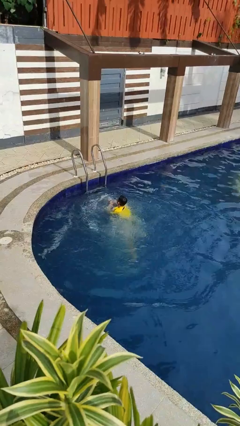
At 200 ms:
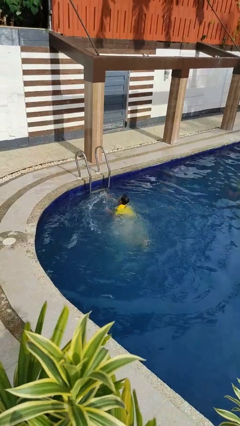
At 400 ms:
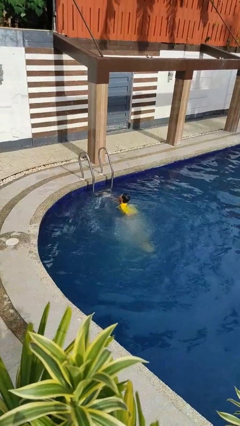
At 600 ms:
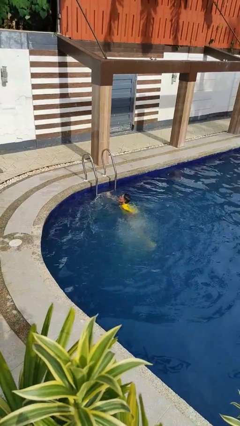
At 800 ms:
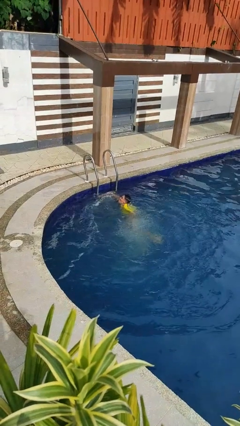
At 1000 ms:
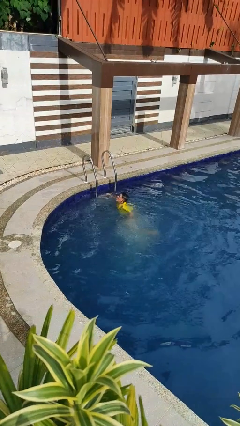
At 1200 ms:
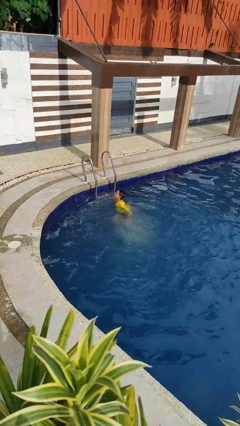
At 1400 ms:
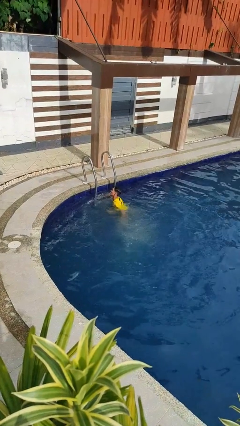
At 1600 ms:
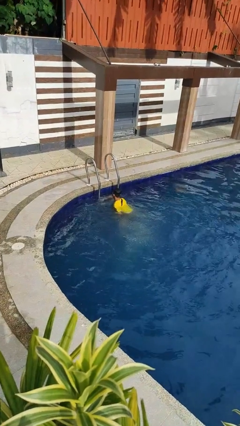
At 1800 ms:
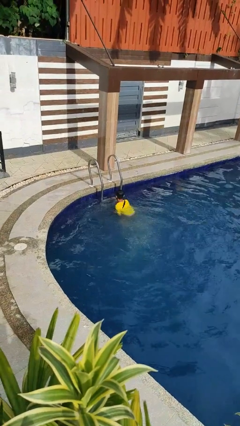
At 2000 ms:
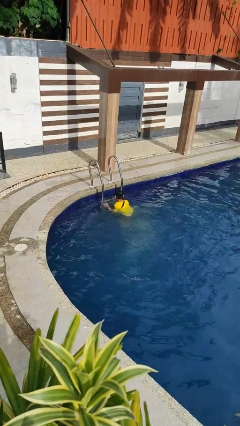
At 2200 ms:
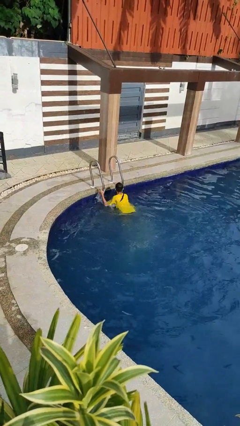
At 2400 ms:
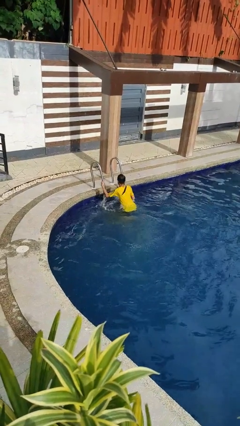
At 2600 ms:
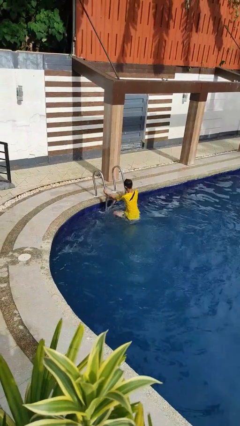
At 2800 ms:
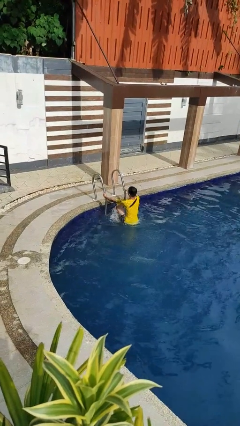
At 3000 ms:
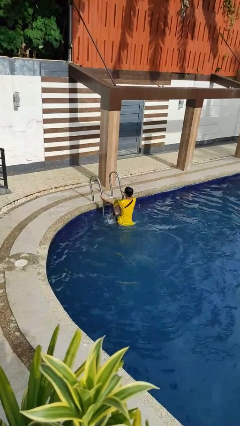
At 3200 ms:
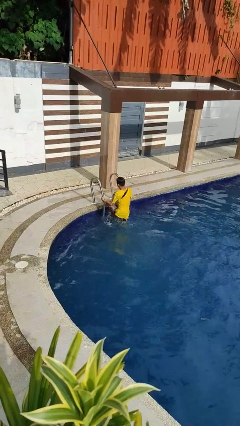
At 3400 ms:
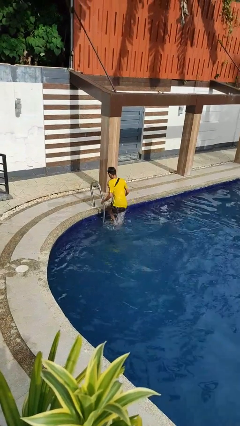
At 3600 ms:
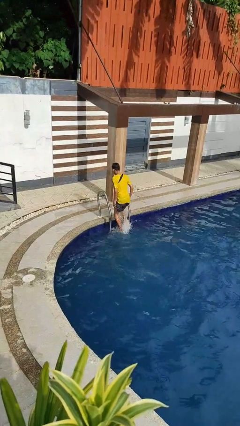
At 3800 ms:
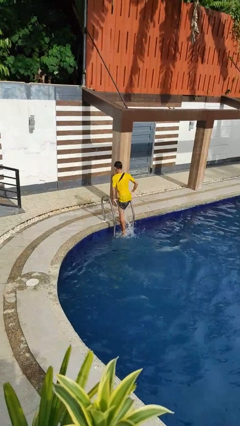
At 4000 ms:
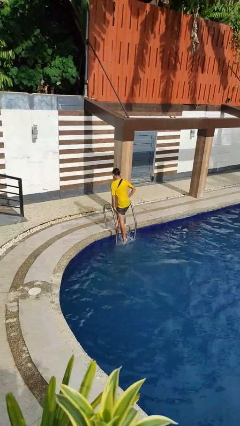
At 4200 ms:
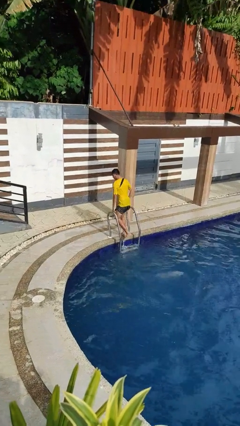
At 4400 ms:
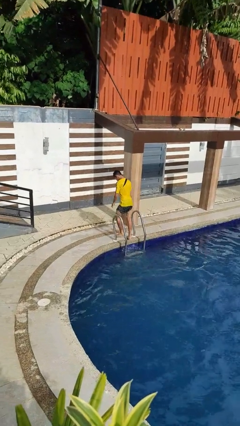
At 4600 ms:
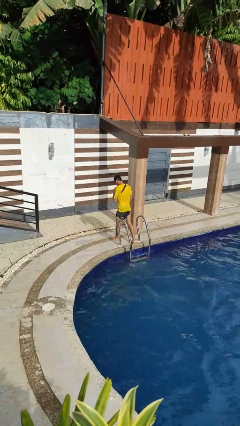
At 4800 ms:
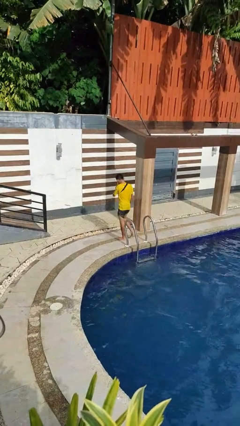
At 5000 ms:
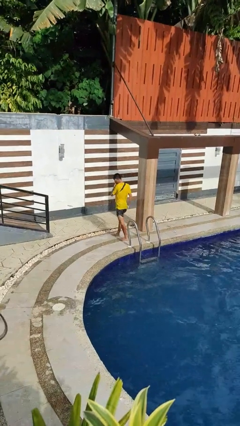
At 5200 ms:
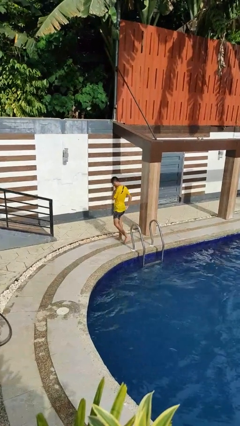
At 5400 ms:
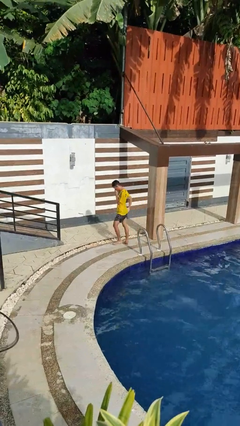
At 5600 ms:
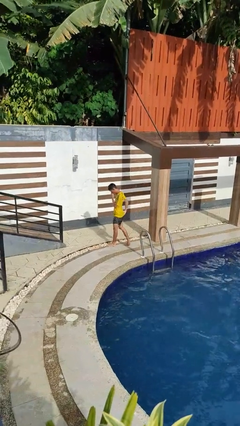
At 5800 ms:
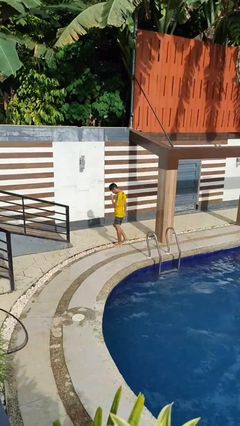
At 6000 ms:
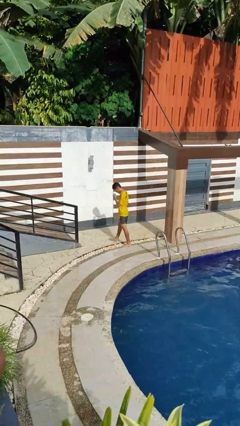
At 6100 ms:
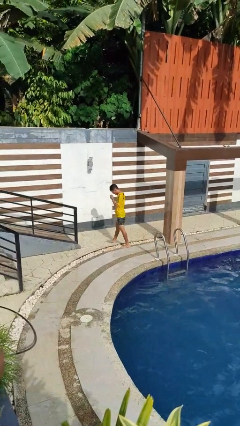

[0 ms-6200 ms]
person exits pool

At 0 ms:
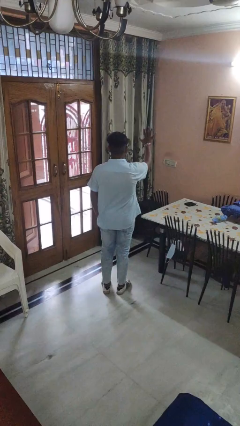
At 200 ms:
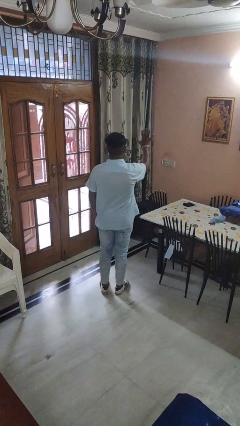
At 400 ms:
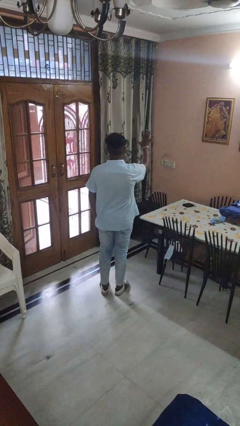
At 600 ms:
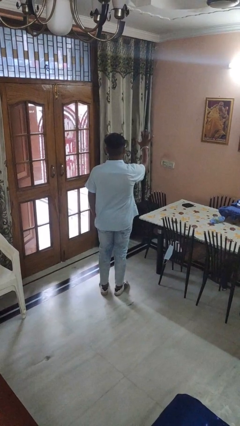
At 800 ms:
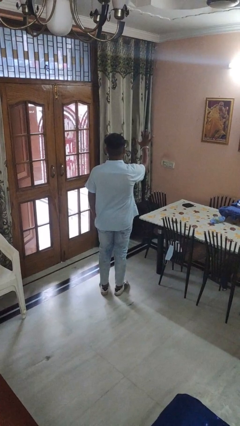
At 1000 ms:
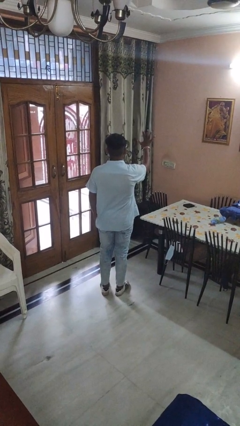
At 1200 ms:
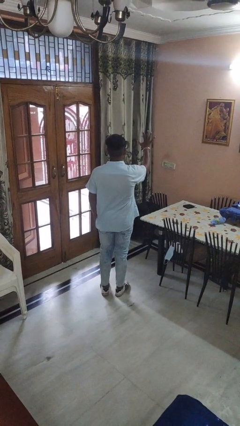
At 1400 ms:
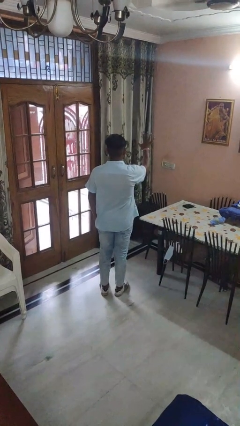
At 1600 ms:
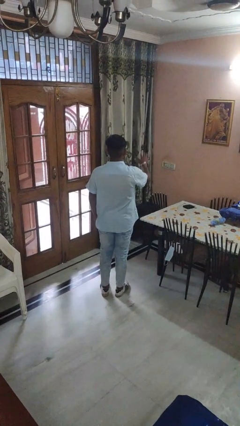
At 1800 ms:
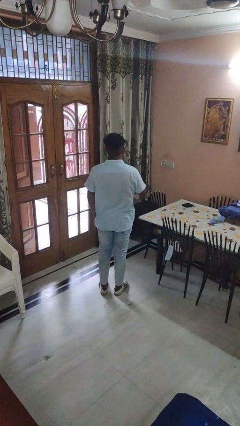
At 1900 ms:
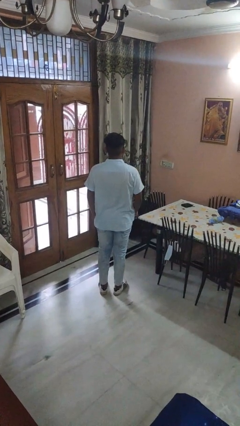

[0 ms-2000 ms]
person gestures number five

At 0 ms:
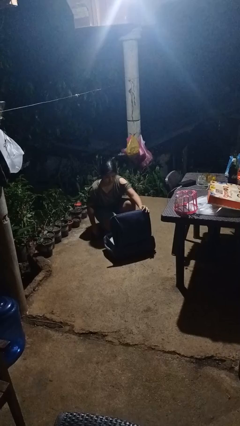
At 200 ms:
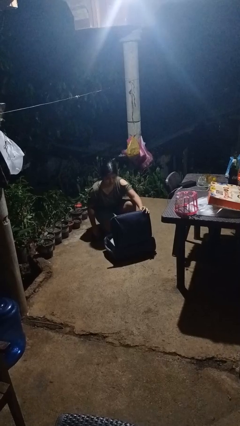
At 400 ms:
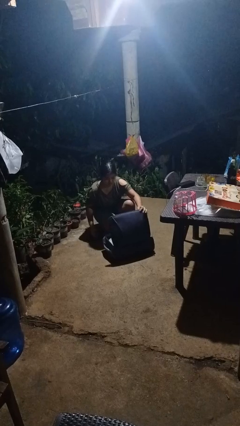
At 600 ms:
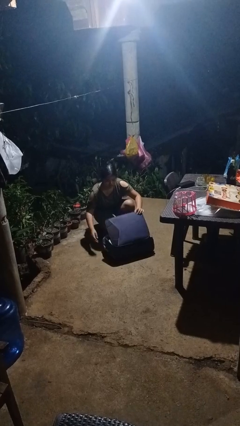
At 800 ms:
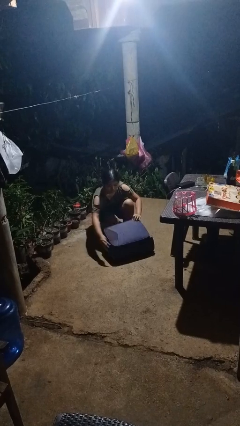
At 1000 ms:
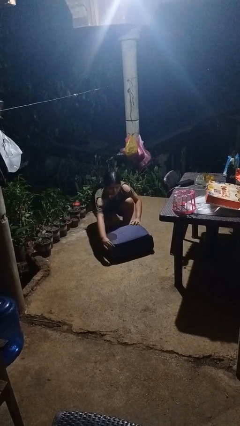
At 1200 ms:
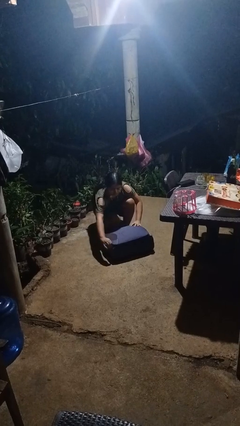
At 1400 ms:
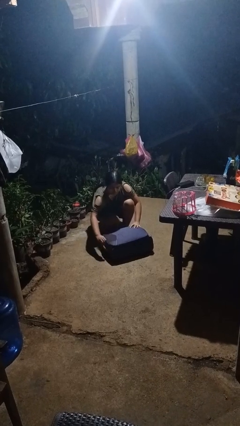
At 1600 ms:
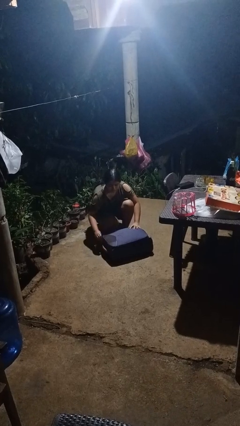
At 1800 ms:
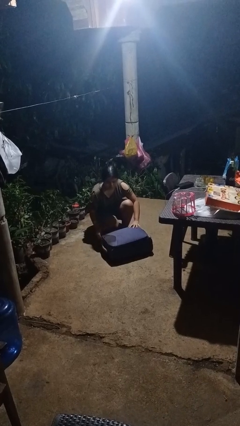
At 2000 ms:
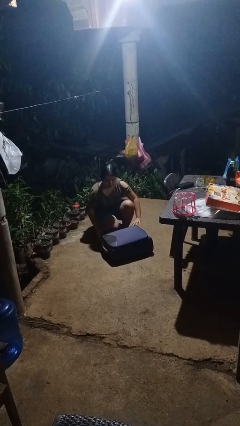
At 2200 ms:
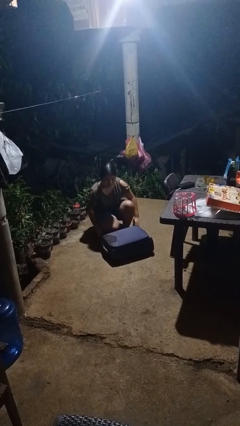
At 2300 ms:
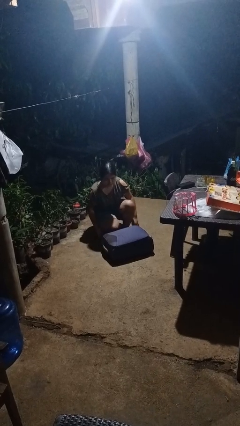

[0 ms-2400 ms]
person closes suitcase

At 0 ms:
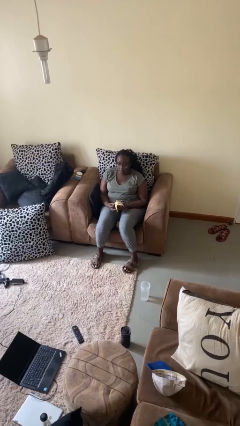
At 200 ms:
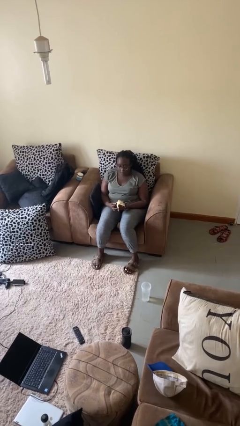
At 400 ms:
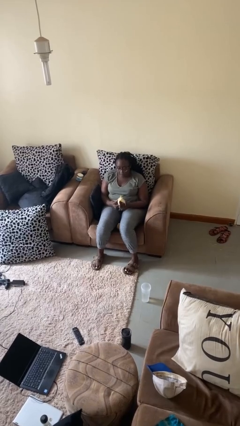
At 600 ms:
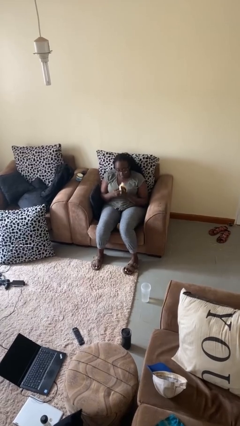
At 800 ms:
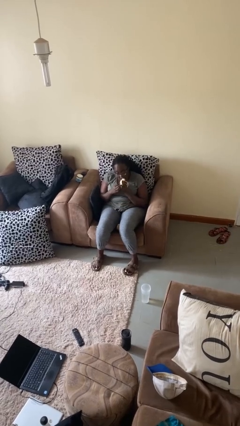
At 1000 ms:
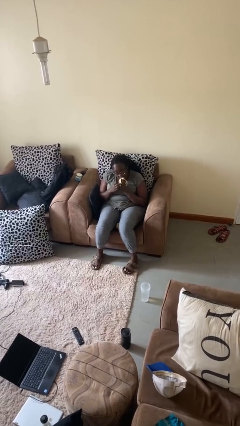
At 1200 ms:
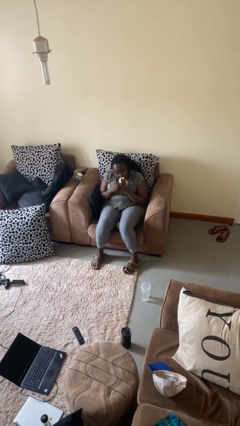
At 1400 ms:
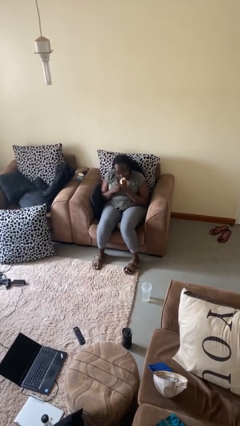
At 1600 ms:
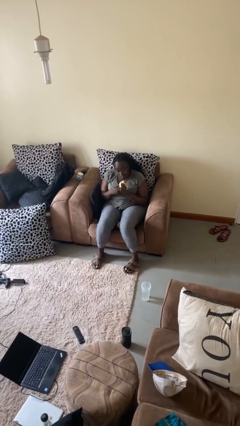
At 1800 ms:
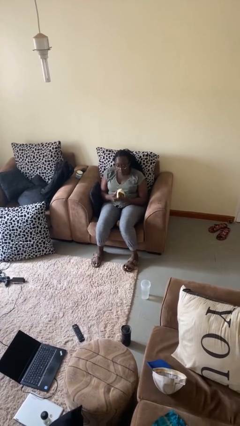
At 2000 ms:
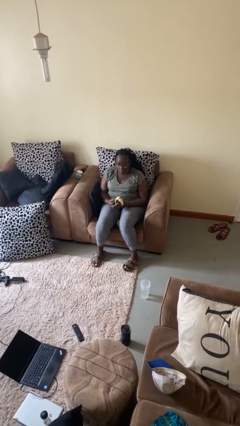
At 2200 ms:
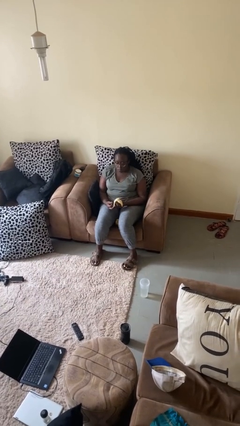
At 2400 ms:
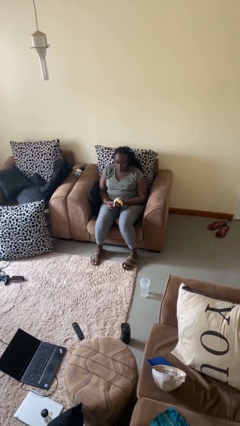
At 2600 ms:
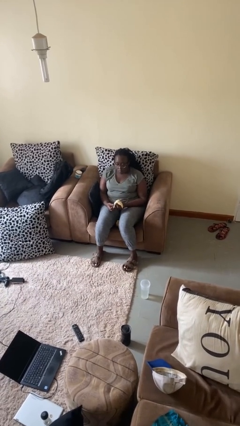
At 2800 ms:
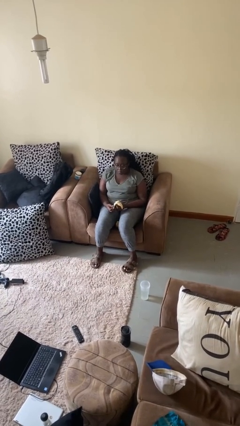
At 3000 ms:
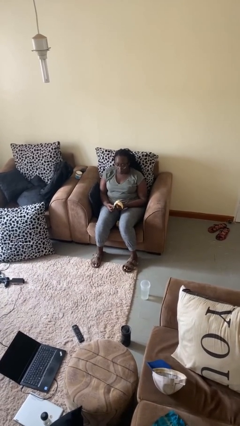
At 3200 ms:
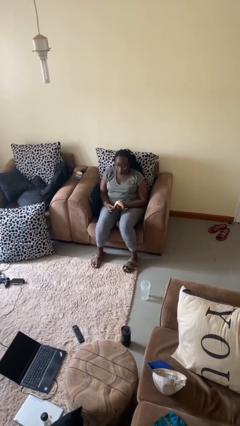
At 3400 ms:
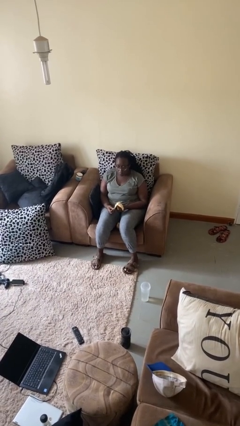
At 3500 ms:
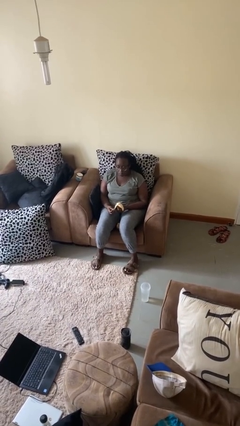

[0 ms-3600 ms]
person eats banana

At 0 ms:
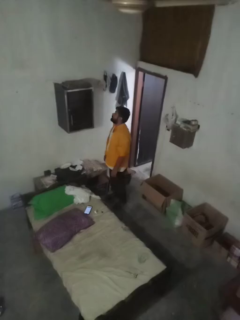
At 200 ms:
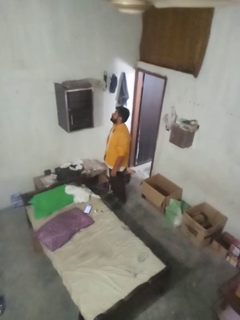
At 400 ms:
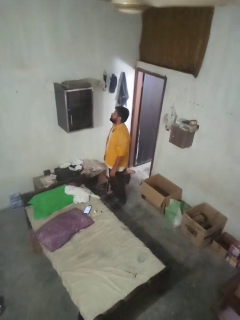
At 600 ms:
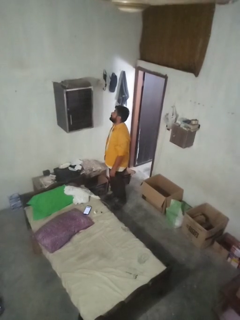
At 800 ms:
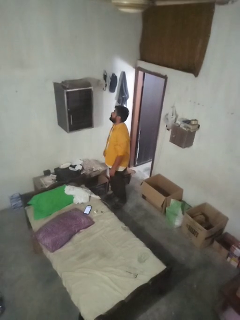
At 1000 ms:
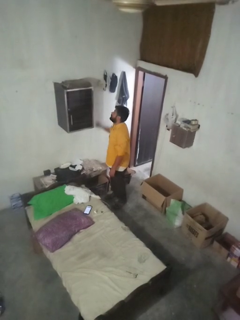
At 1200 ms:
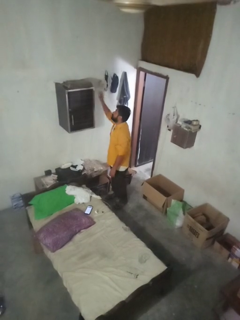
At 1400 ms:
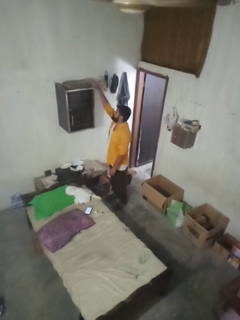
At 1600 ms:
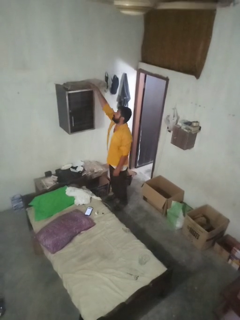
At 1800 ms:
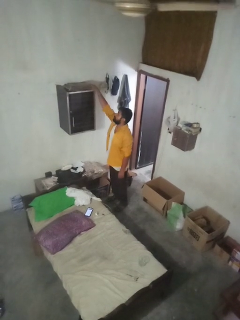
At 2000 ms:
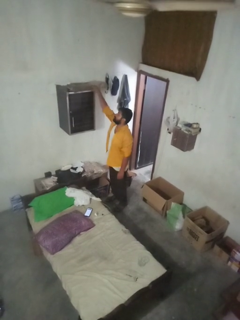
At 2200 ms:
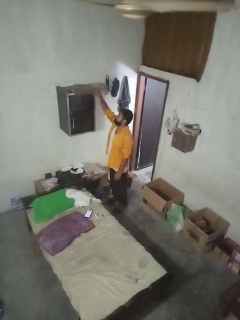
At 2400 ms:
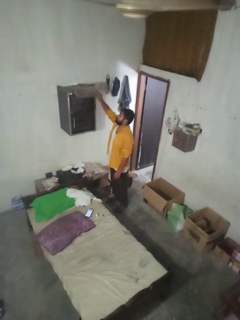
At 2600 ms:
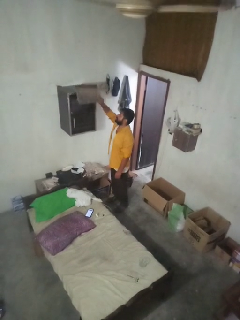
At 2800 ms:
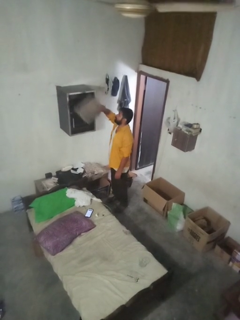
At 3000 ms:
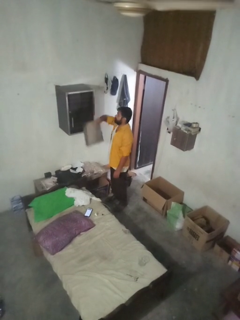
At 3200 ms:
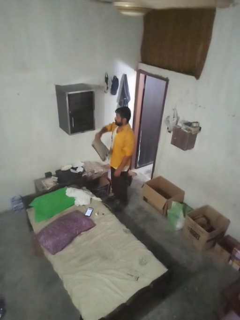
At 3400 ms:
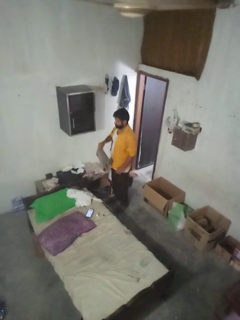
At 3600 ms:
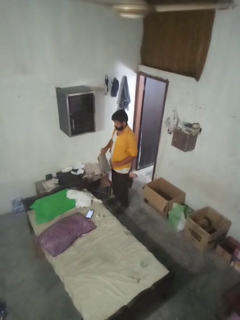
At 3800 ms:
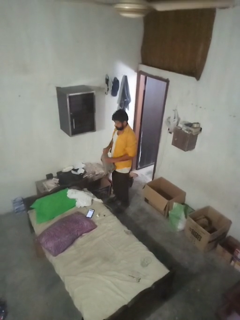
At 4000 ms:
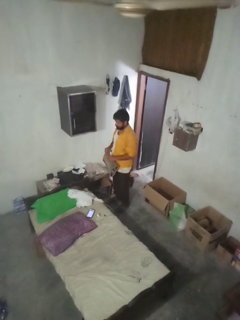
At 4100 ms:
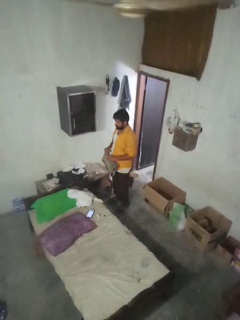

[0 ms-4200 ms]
person picks up object from shelf
